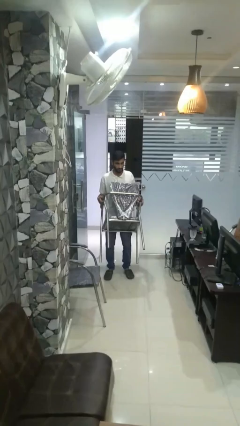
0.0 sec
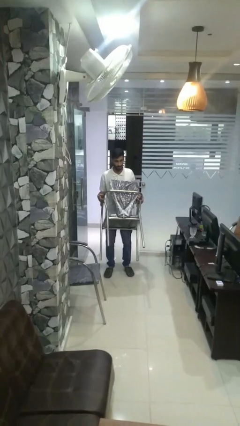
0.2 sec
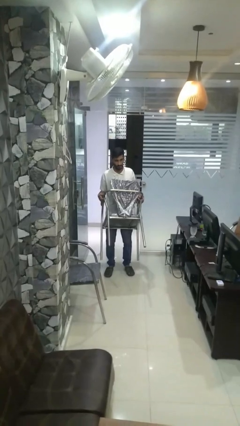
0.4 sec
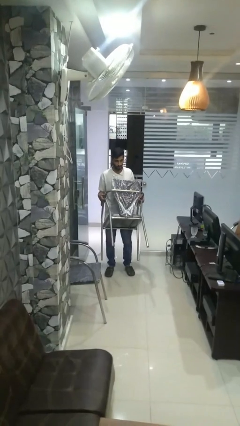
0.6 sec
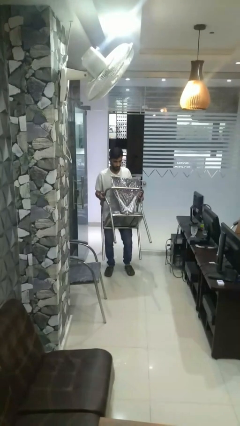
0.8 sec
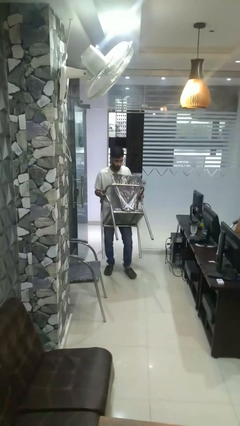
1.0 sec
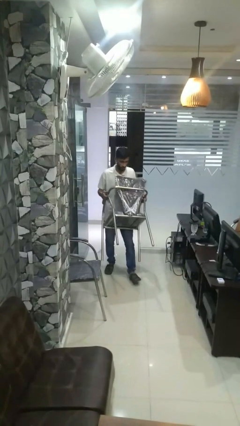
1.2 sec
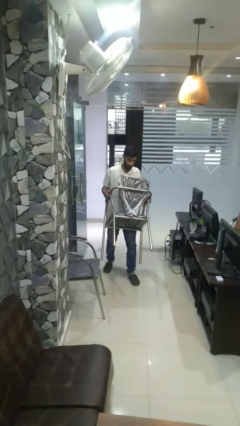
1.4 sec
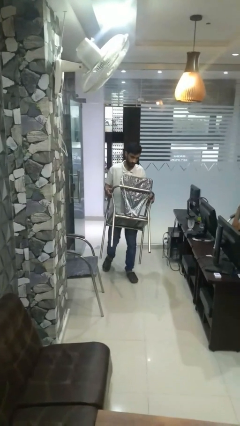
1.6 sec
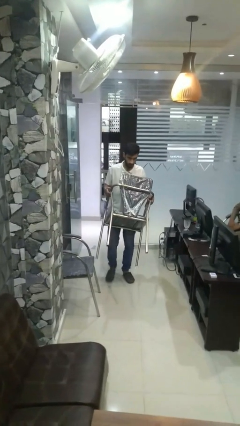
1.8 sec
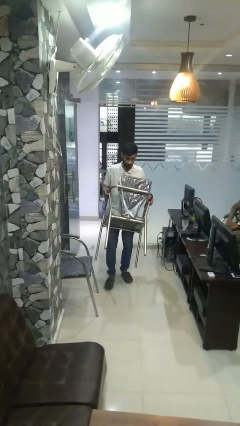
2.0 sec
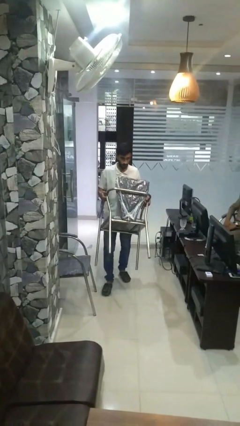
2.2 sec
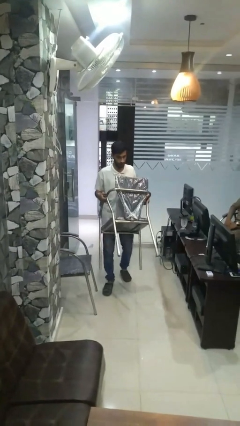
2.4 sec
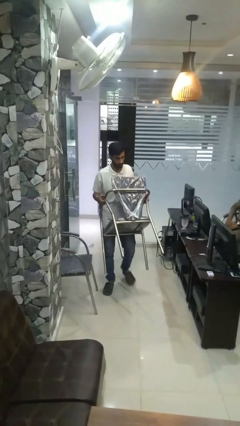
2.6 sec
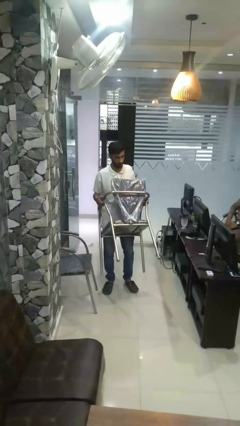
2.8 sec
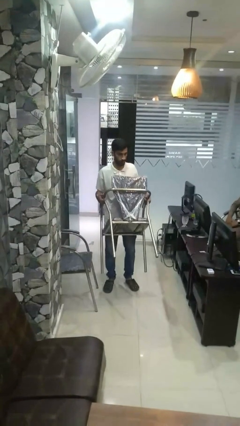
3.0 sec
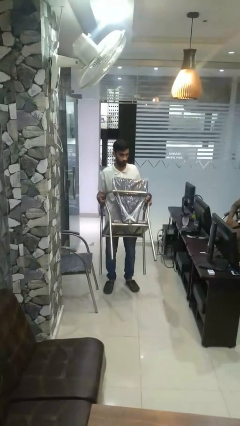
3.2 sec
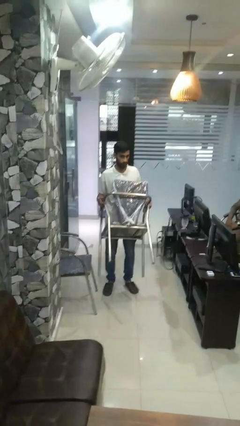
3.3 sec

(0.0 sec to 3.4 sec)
person carries furniture

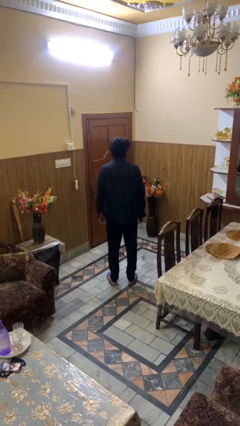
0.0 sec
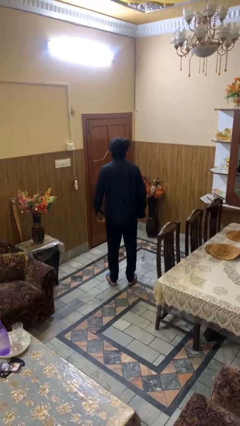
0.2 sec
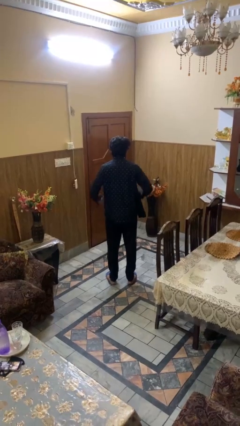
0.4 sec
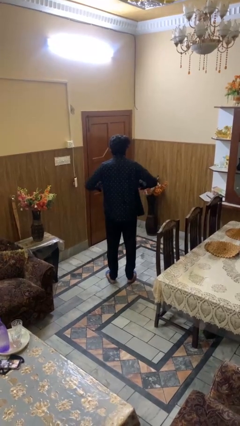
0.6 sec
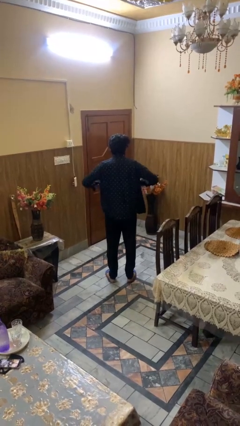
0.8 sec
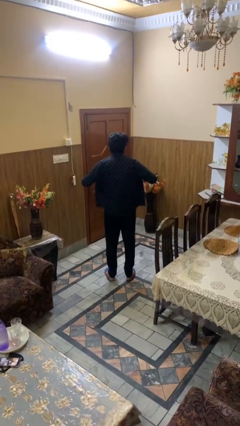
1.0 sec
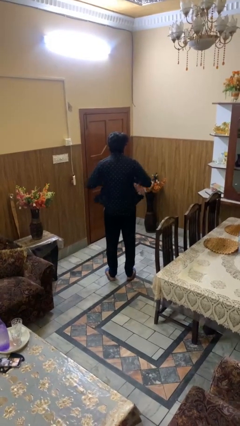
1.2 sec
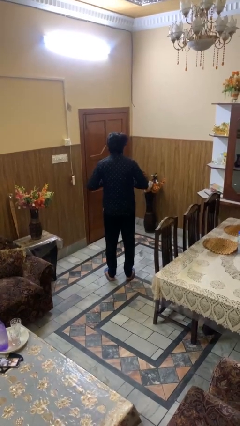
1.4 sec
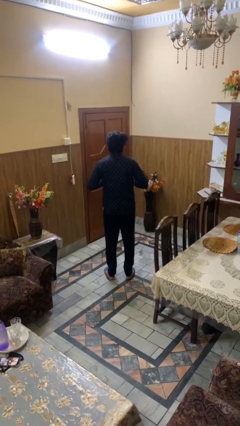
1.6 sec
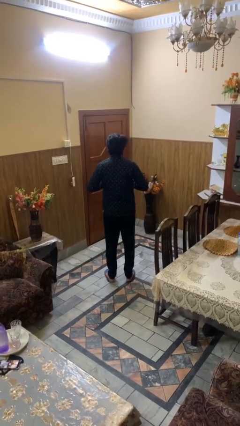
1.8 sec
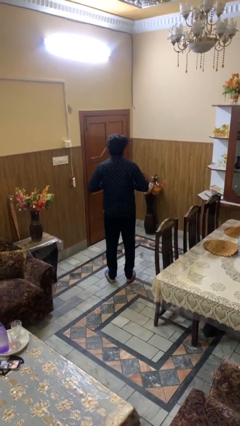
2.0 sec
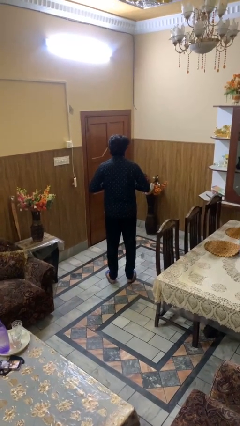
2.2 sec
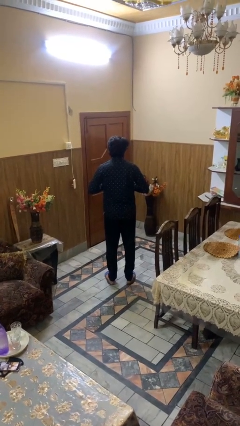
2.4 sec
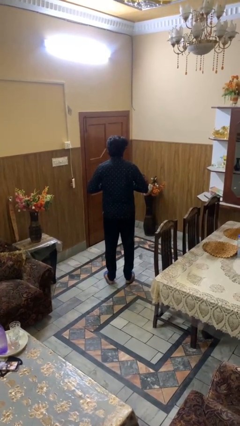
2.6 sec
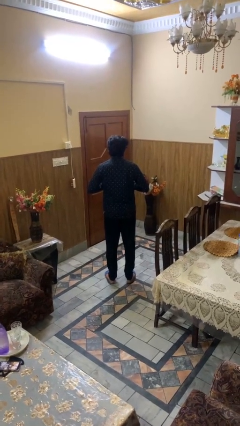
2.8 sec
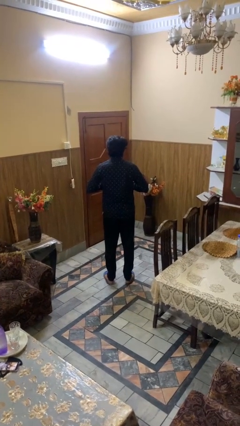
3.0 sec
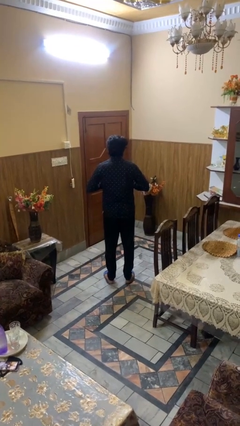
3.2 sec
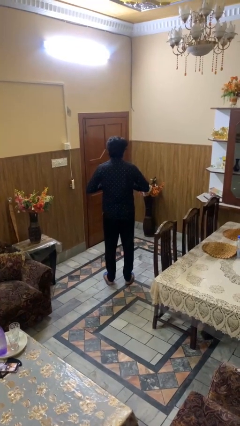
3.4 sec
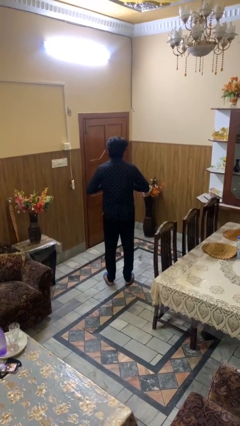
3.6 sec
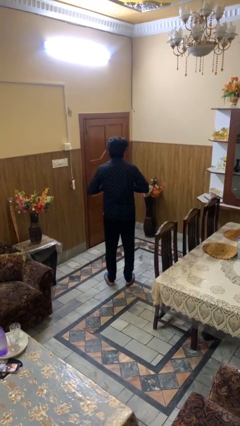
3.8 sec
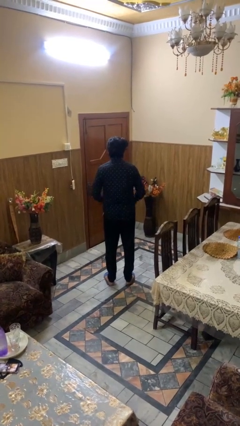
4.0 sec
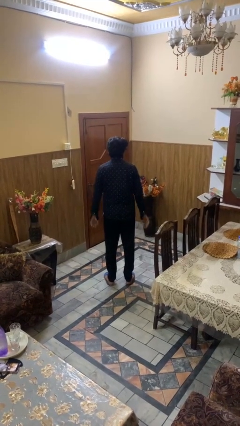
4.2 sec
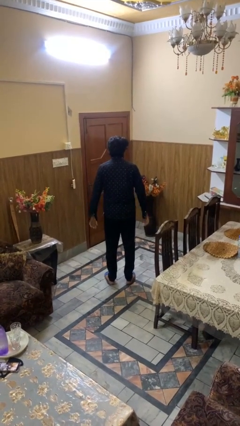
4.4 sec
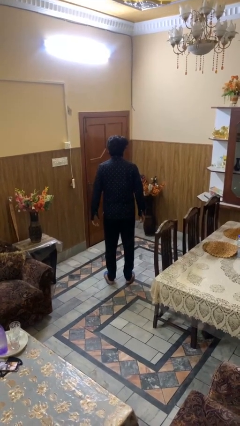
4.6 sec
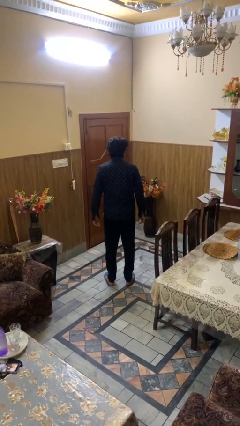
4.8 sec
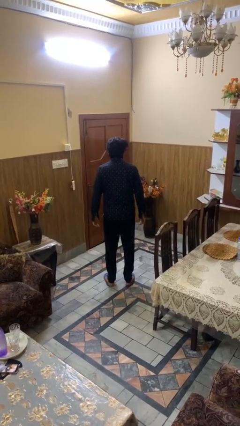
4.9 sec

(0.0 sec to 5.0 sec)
person buttons shirt

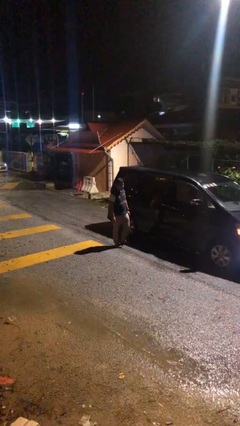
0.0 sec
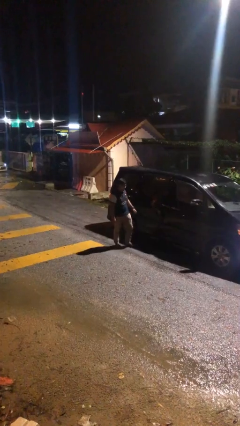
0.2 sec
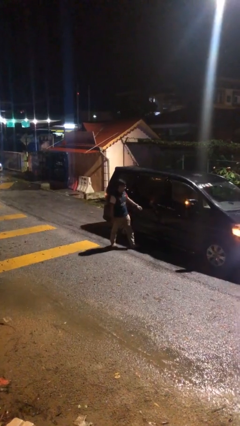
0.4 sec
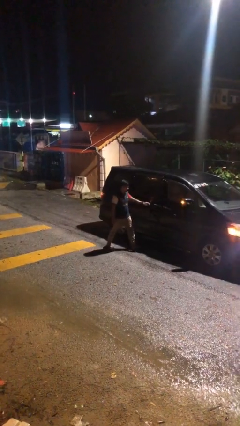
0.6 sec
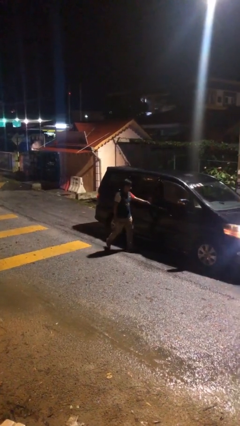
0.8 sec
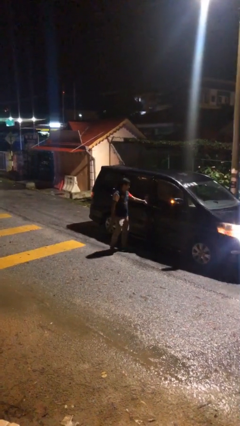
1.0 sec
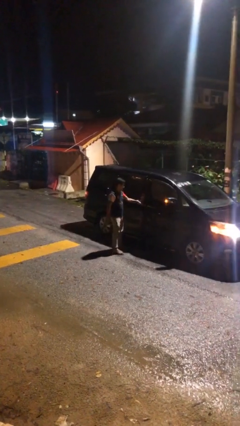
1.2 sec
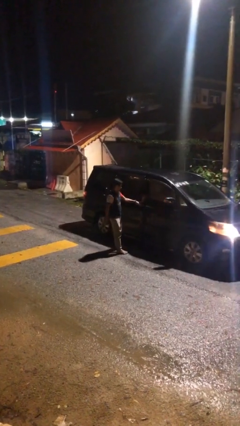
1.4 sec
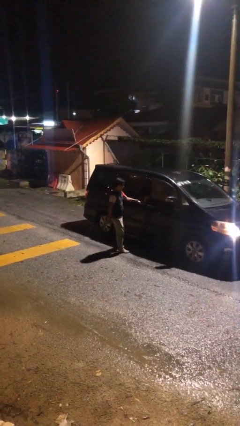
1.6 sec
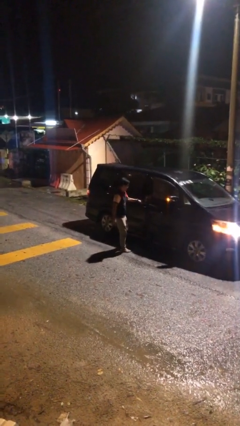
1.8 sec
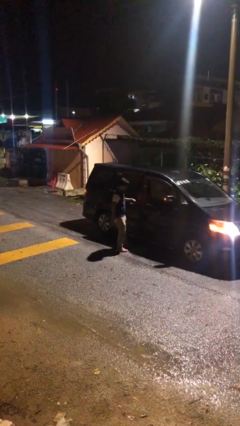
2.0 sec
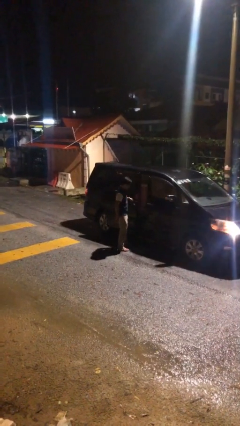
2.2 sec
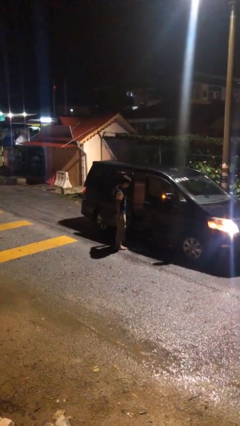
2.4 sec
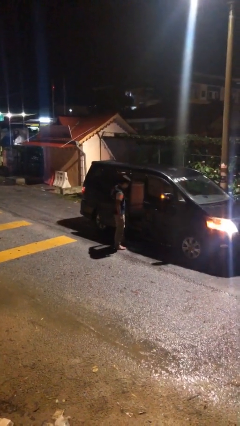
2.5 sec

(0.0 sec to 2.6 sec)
person opens car door

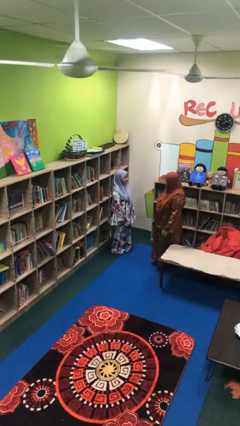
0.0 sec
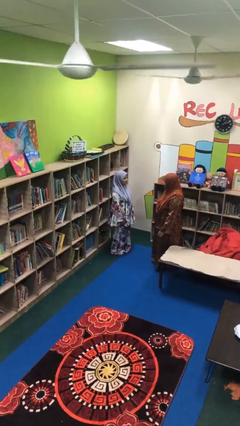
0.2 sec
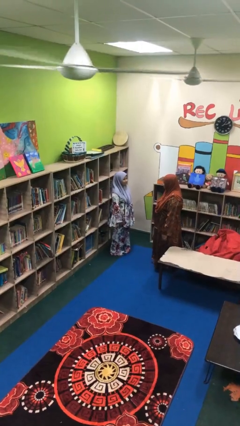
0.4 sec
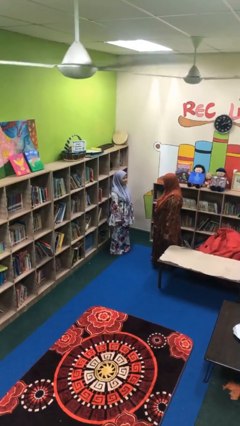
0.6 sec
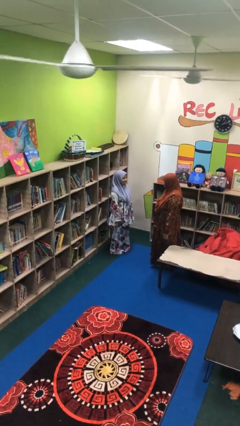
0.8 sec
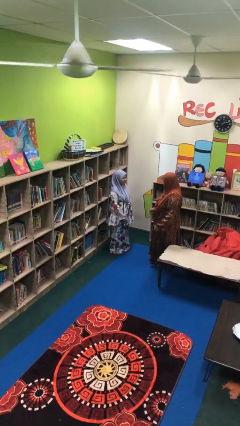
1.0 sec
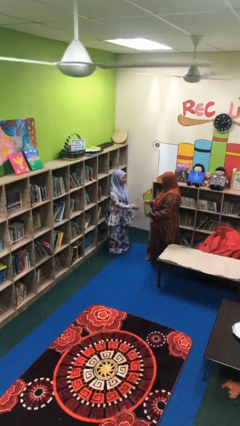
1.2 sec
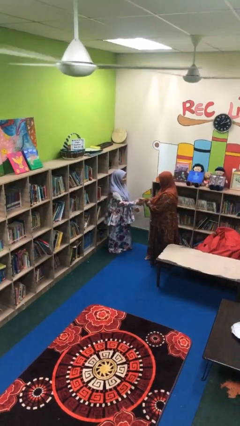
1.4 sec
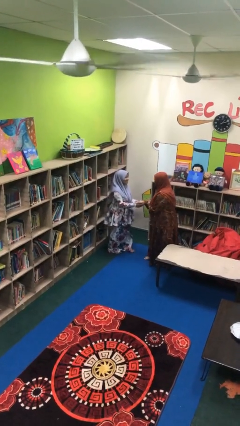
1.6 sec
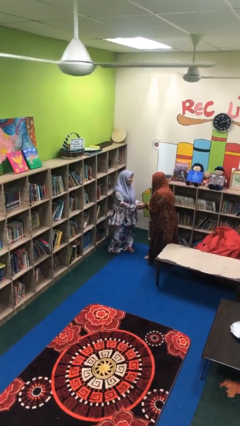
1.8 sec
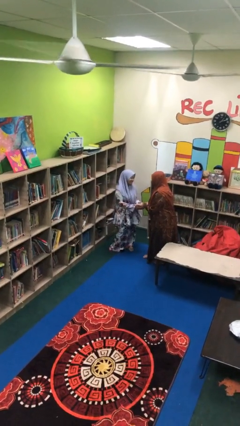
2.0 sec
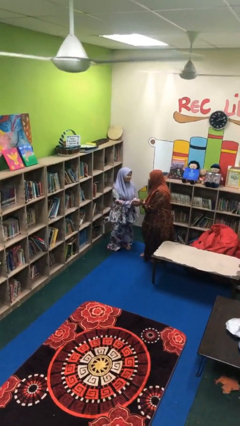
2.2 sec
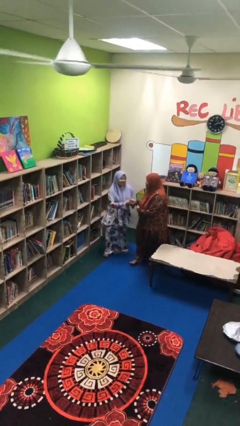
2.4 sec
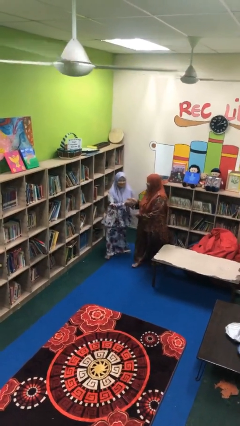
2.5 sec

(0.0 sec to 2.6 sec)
person shakes hand

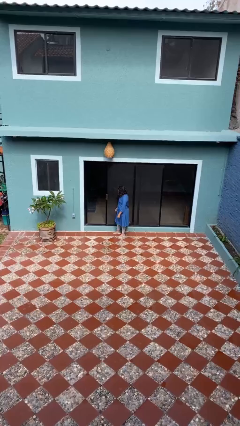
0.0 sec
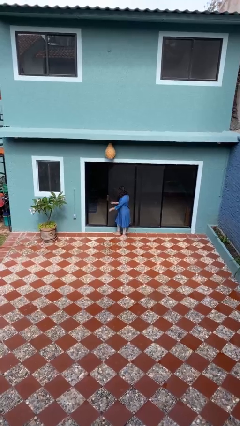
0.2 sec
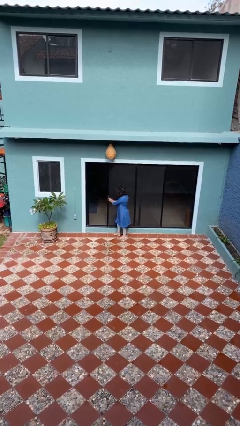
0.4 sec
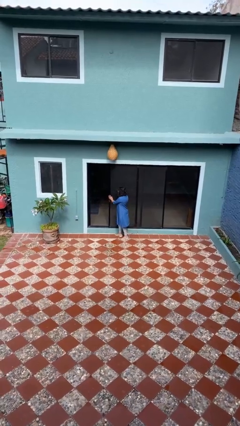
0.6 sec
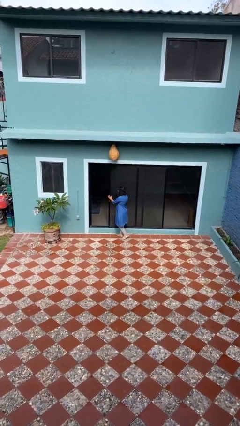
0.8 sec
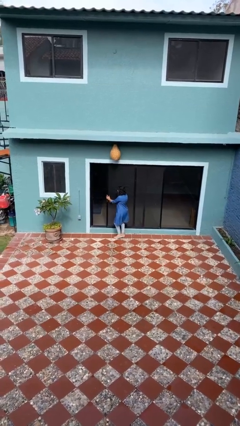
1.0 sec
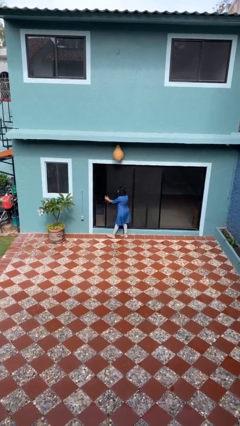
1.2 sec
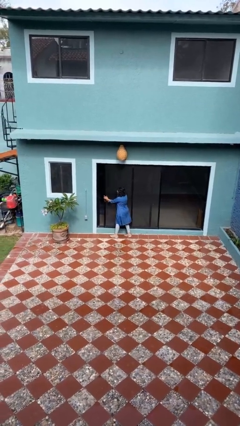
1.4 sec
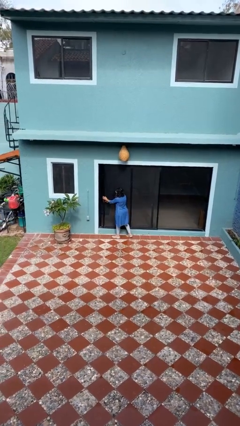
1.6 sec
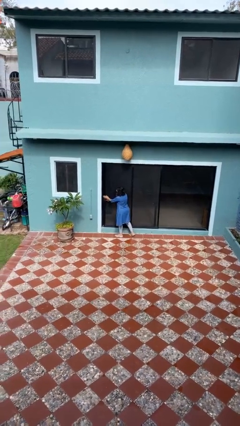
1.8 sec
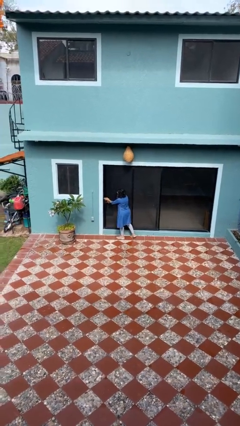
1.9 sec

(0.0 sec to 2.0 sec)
person closes sliding door

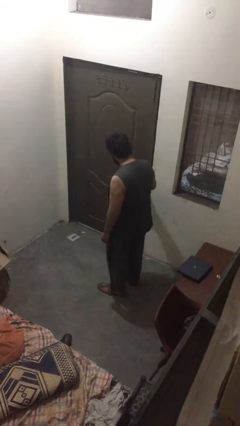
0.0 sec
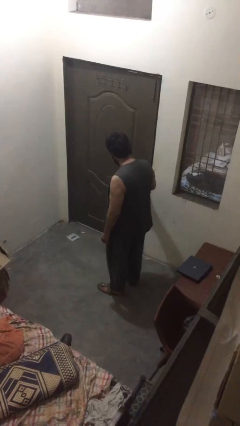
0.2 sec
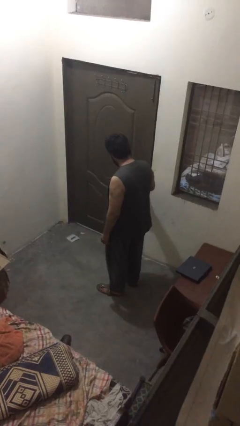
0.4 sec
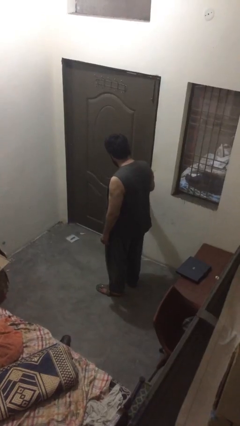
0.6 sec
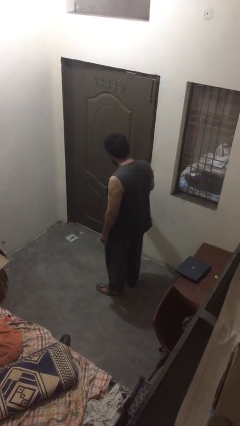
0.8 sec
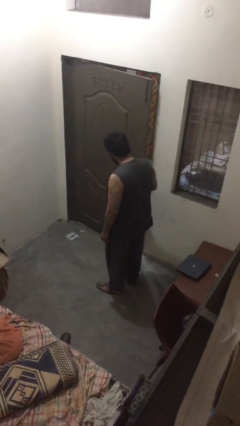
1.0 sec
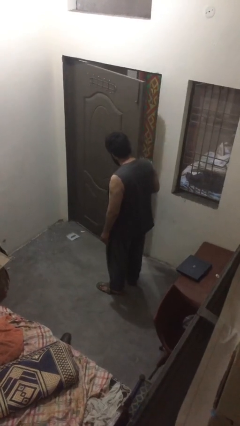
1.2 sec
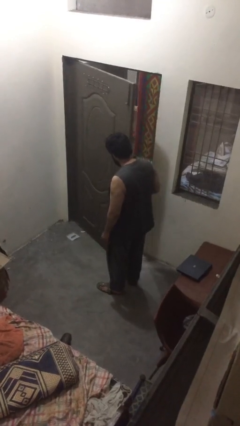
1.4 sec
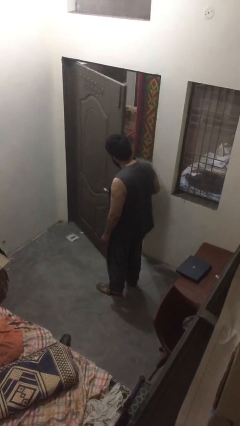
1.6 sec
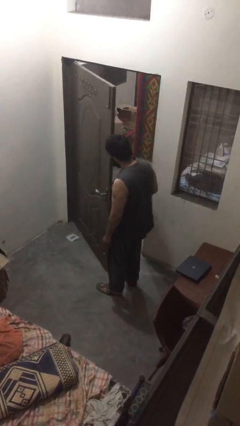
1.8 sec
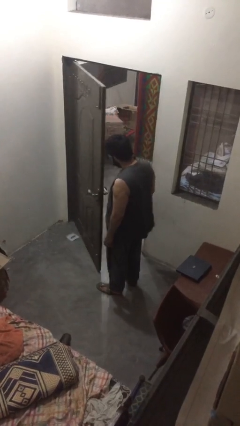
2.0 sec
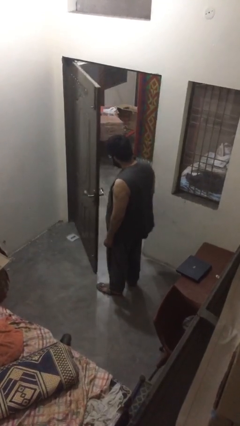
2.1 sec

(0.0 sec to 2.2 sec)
person opens facility door
